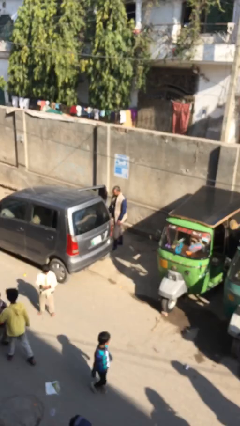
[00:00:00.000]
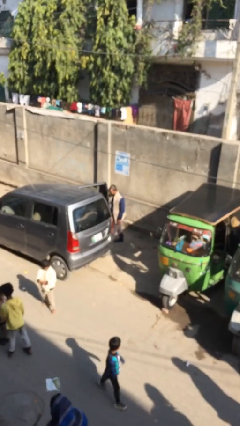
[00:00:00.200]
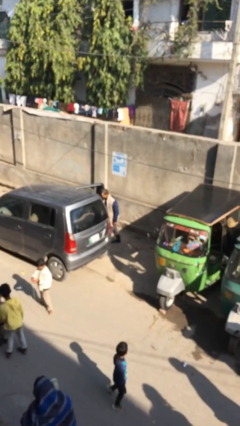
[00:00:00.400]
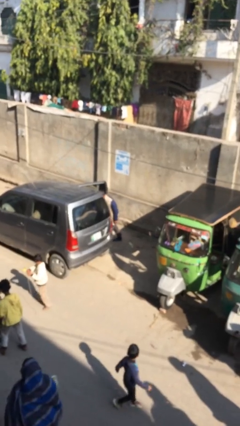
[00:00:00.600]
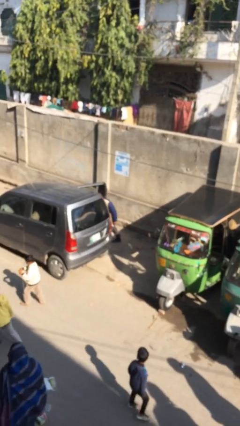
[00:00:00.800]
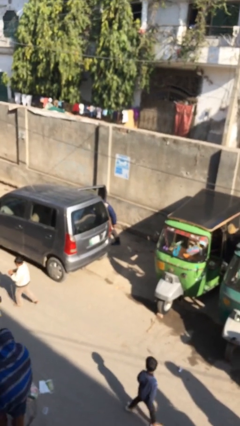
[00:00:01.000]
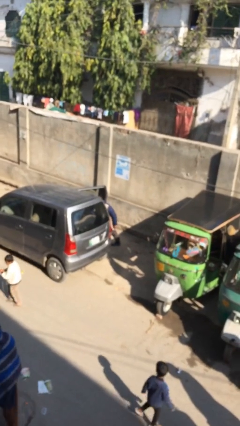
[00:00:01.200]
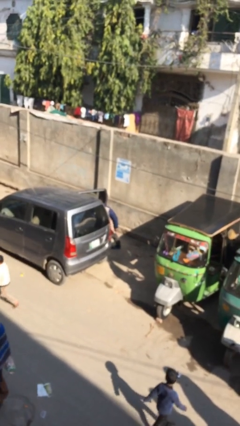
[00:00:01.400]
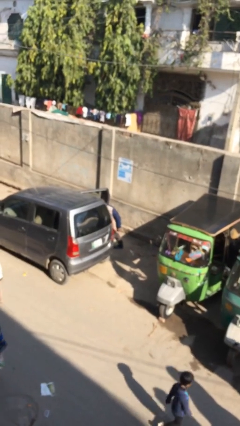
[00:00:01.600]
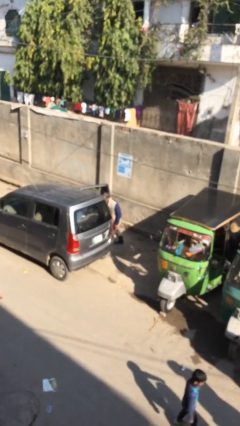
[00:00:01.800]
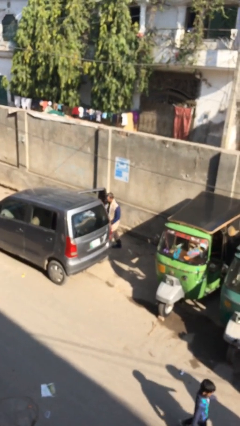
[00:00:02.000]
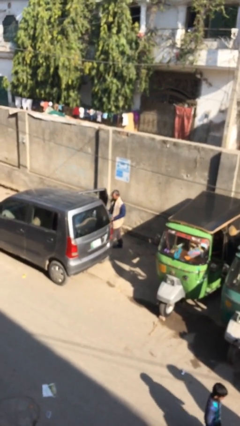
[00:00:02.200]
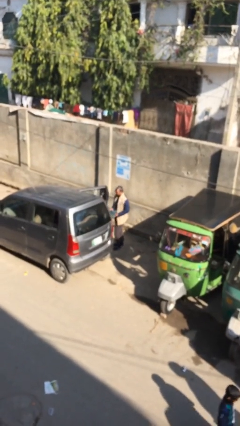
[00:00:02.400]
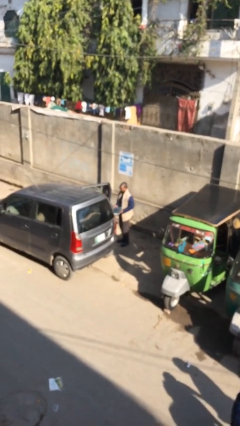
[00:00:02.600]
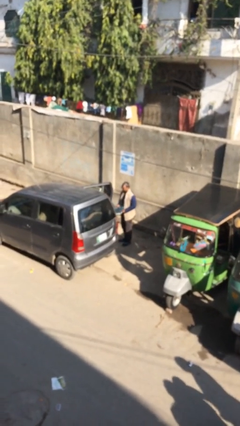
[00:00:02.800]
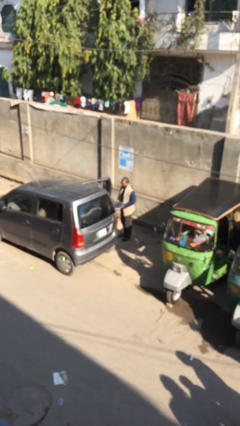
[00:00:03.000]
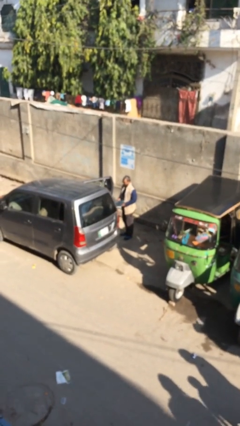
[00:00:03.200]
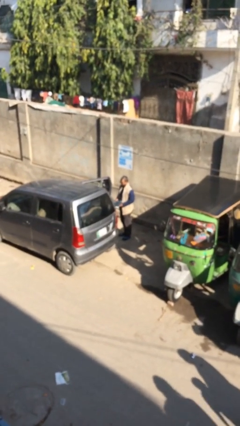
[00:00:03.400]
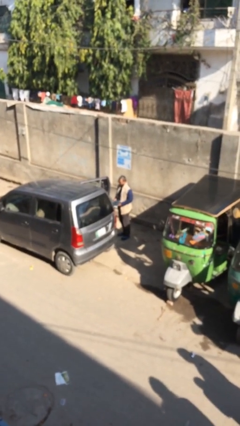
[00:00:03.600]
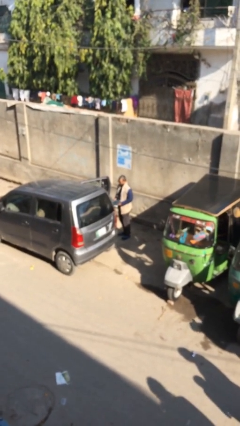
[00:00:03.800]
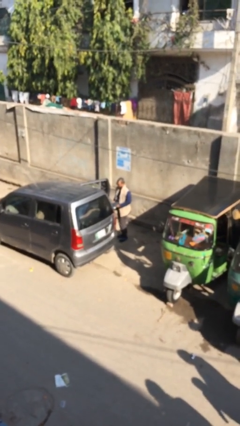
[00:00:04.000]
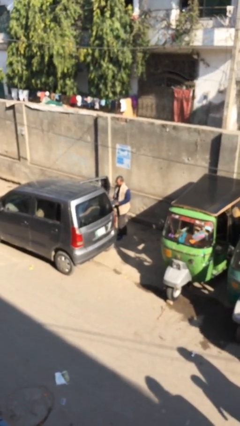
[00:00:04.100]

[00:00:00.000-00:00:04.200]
person unloads car

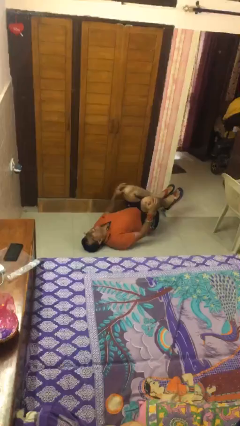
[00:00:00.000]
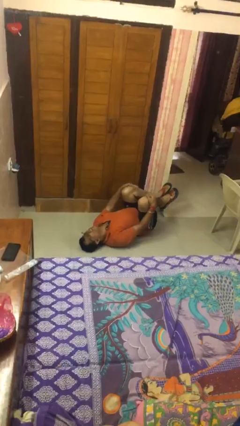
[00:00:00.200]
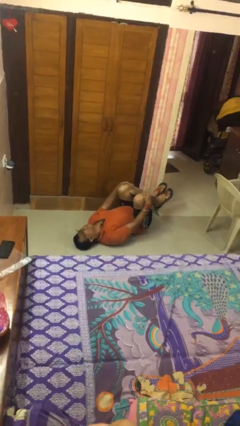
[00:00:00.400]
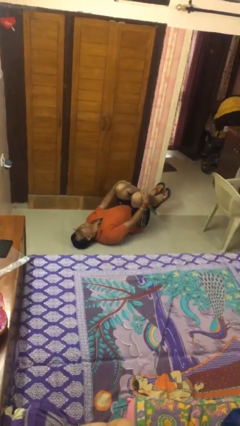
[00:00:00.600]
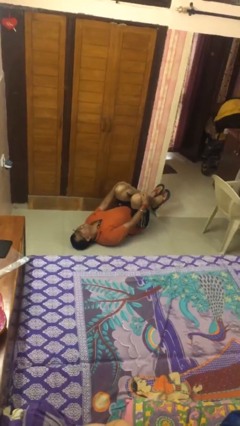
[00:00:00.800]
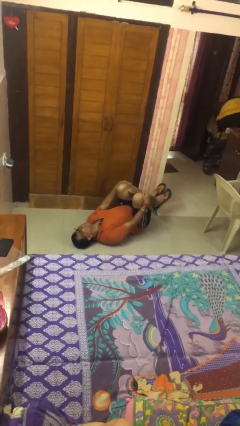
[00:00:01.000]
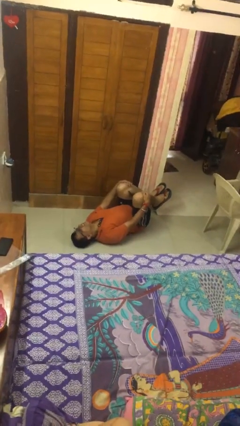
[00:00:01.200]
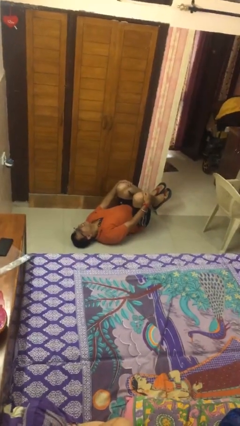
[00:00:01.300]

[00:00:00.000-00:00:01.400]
person lies down on floor

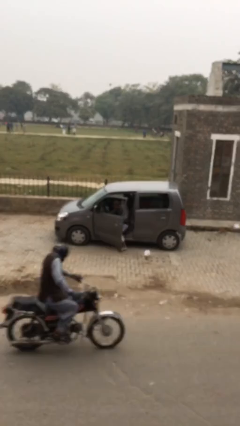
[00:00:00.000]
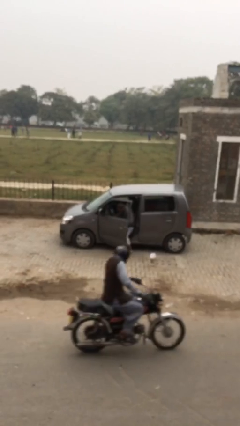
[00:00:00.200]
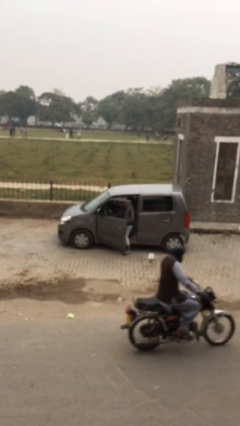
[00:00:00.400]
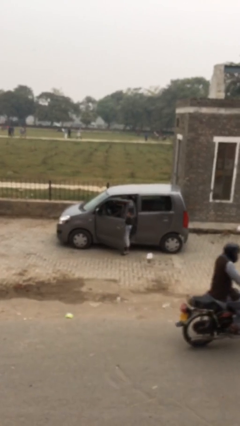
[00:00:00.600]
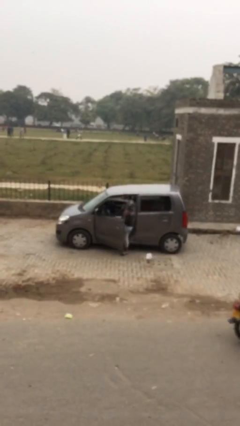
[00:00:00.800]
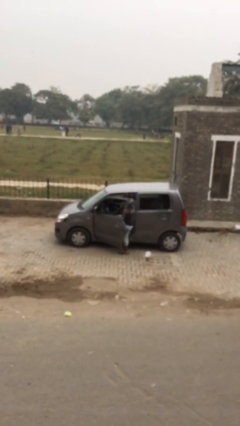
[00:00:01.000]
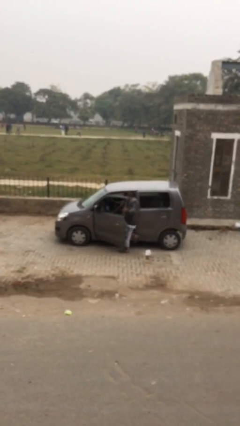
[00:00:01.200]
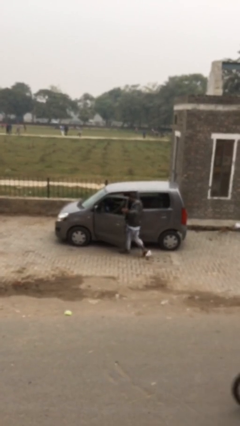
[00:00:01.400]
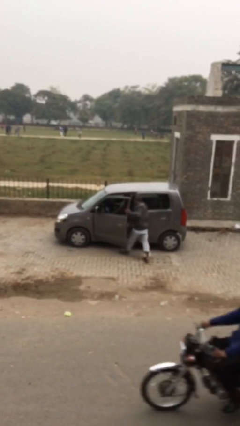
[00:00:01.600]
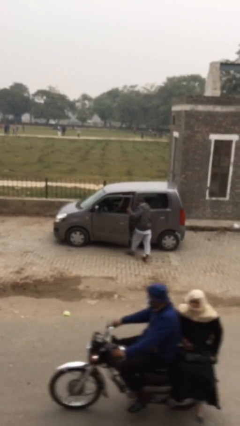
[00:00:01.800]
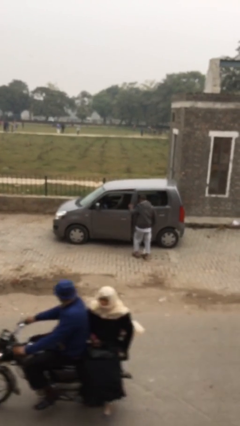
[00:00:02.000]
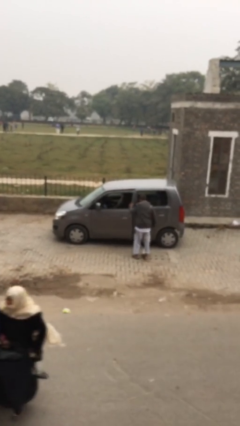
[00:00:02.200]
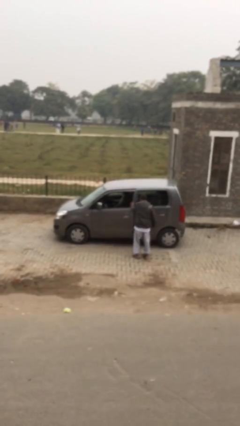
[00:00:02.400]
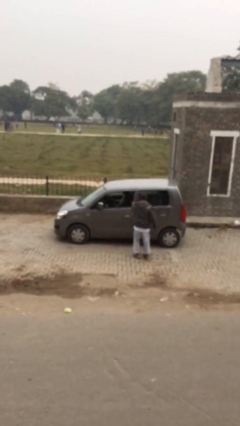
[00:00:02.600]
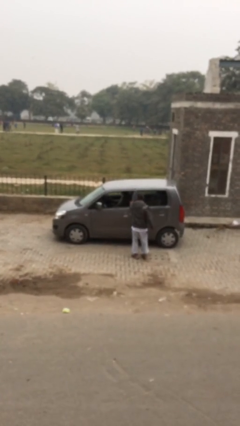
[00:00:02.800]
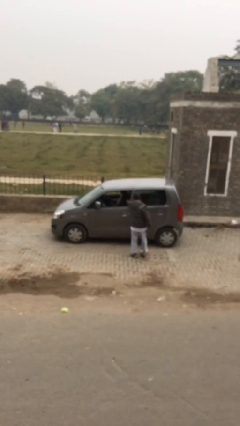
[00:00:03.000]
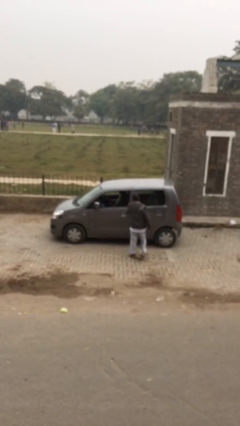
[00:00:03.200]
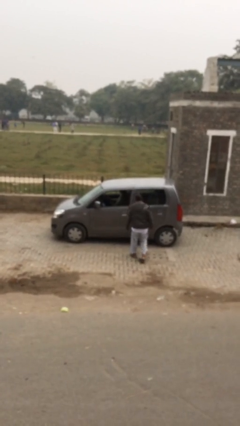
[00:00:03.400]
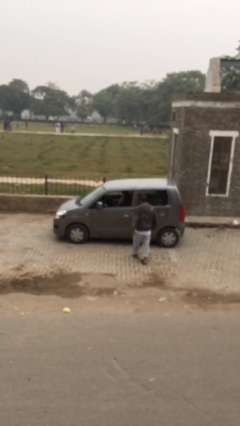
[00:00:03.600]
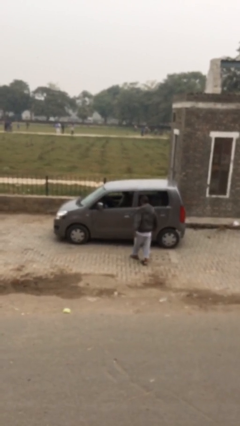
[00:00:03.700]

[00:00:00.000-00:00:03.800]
car drops off person

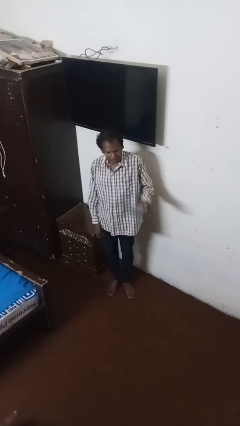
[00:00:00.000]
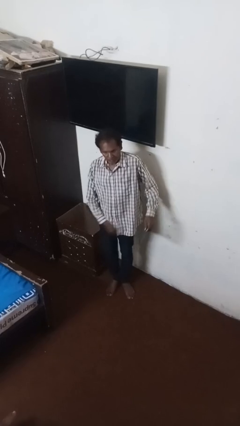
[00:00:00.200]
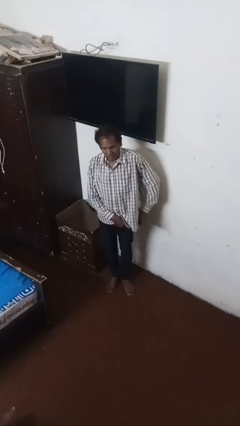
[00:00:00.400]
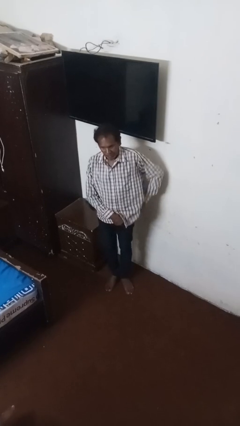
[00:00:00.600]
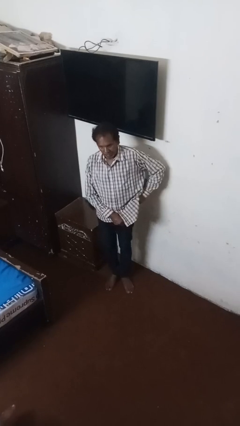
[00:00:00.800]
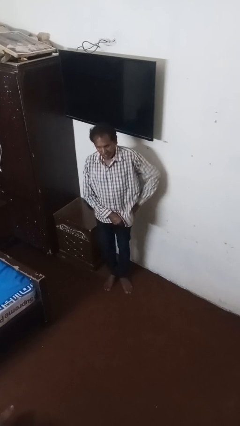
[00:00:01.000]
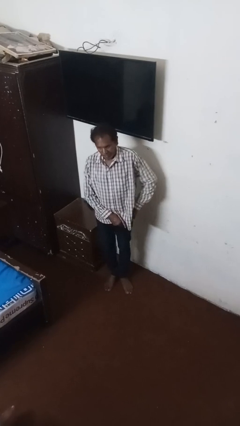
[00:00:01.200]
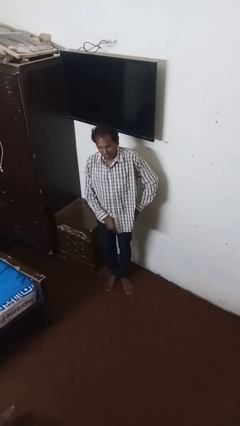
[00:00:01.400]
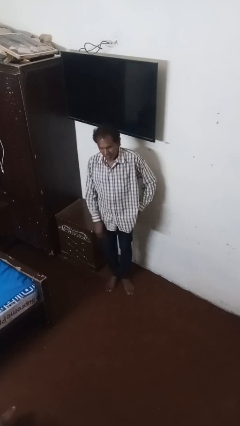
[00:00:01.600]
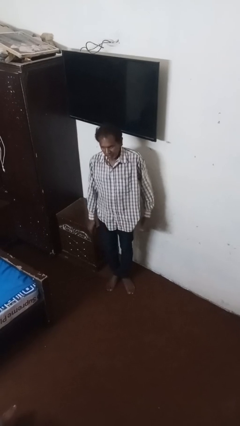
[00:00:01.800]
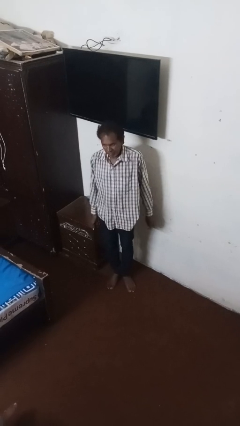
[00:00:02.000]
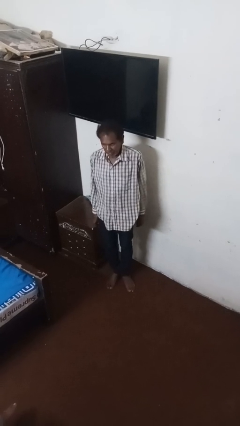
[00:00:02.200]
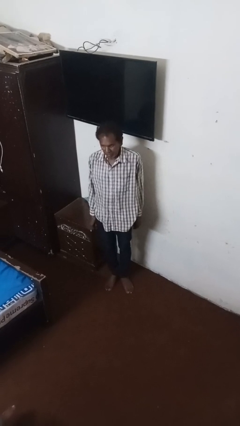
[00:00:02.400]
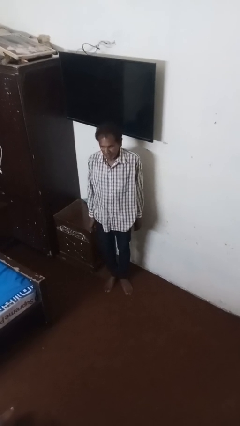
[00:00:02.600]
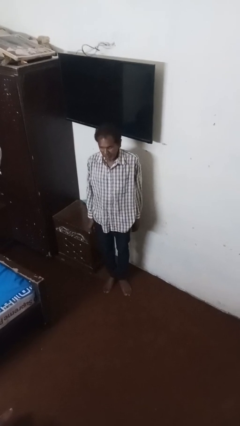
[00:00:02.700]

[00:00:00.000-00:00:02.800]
person puts phone into pocket

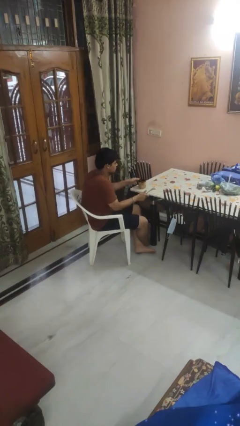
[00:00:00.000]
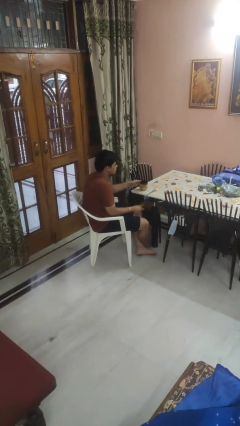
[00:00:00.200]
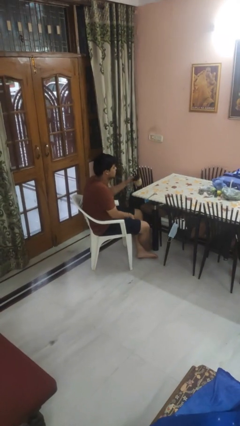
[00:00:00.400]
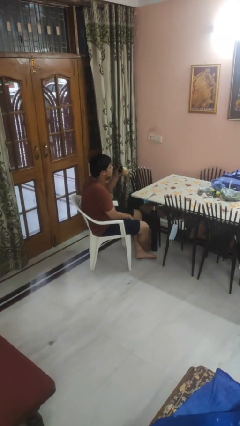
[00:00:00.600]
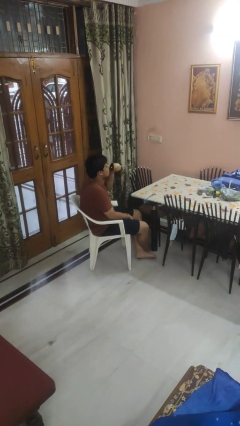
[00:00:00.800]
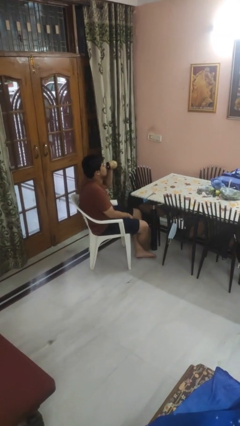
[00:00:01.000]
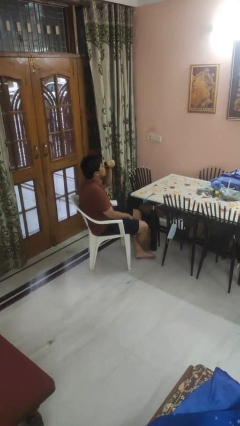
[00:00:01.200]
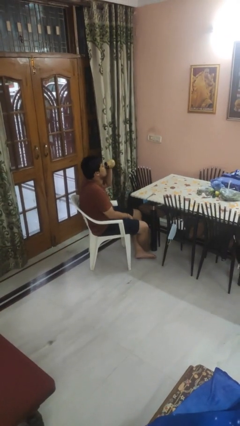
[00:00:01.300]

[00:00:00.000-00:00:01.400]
person drinks from mug

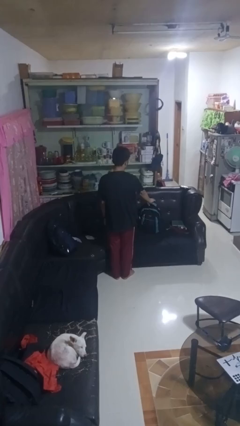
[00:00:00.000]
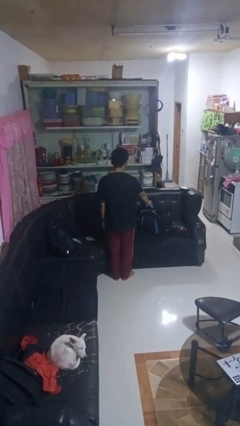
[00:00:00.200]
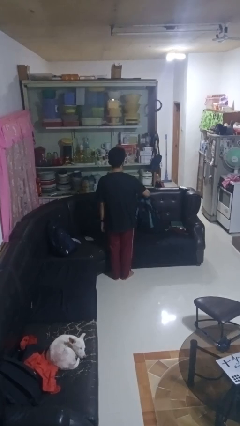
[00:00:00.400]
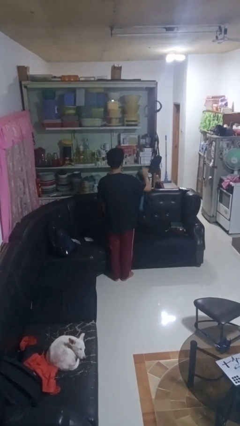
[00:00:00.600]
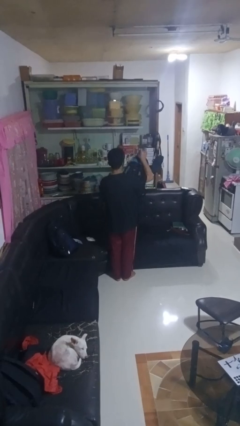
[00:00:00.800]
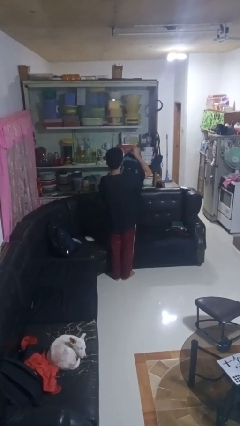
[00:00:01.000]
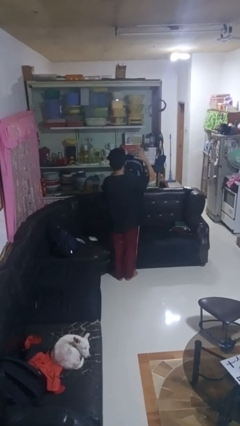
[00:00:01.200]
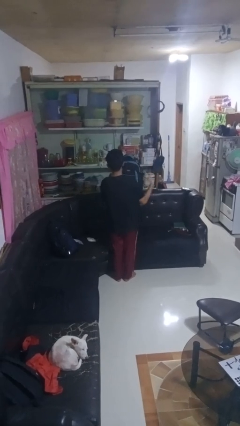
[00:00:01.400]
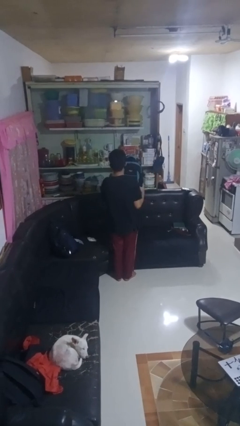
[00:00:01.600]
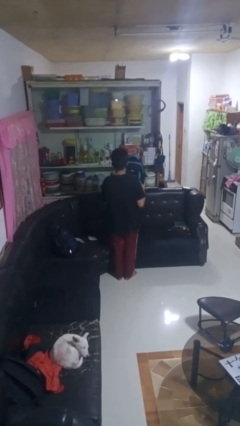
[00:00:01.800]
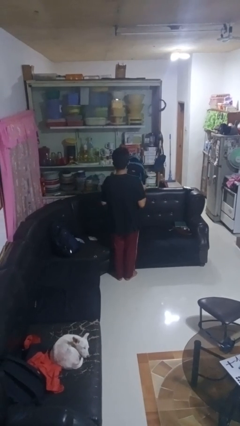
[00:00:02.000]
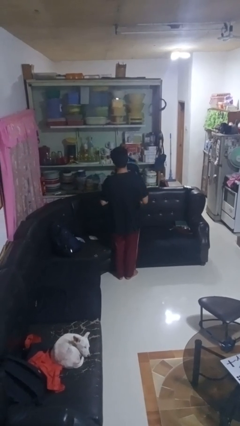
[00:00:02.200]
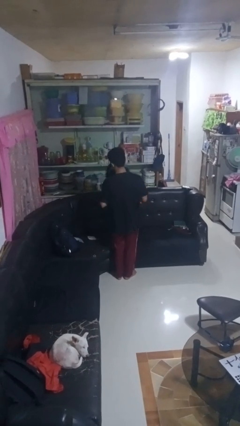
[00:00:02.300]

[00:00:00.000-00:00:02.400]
person picks up object from couch

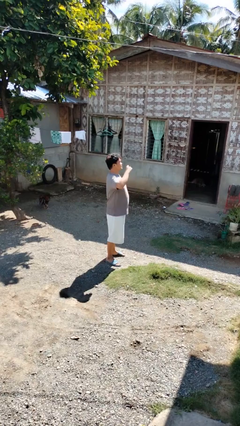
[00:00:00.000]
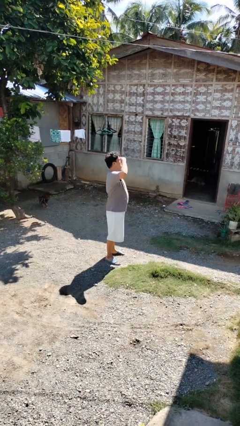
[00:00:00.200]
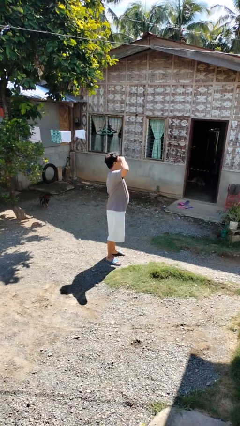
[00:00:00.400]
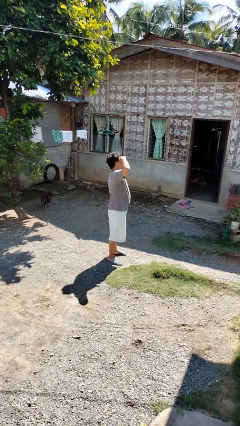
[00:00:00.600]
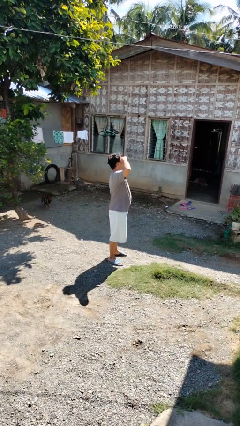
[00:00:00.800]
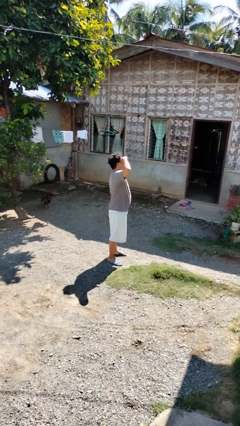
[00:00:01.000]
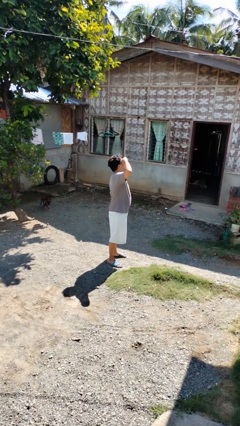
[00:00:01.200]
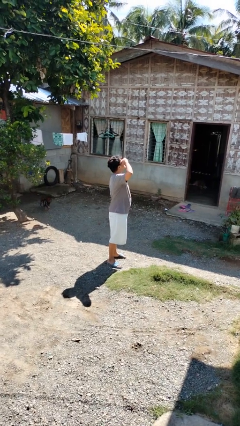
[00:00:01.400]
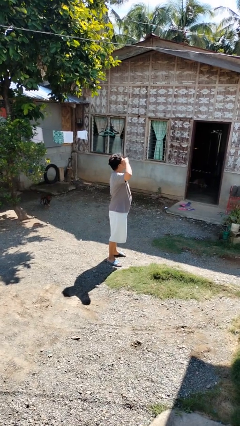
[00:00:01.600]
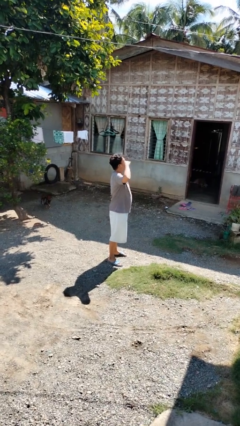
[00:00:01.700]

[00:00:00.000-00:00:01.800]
person shades eyes
